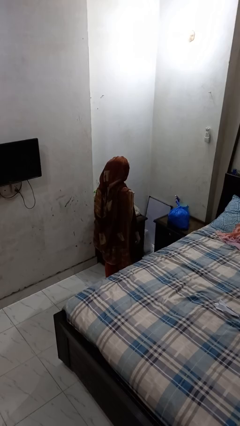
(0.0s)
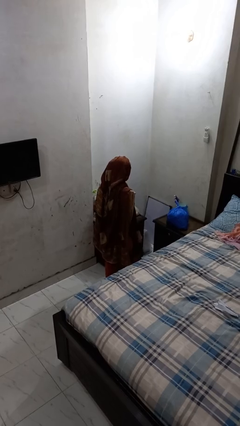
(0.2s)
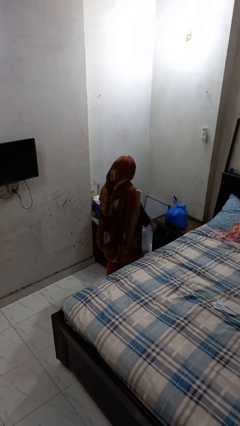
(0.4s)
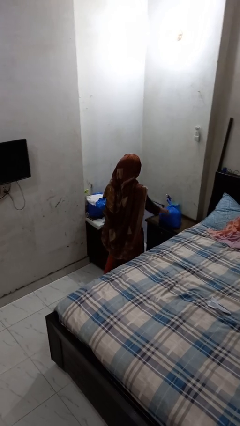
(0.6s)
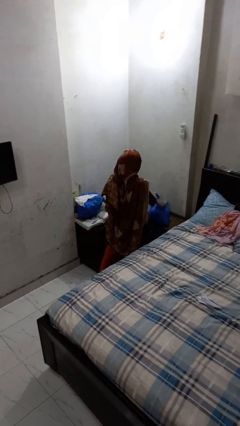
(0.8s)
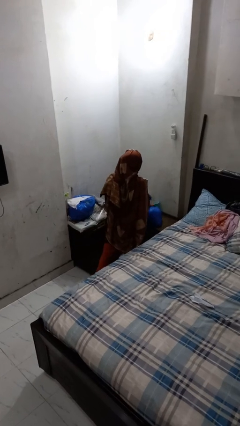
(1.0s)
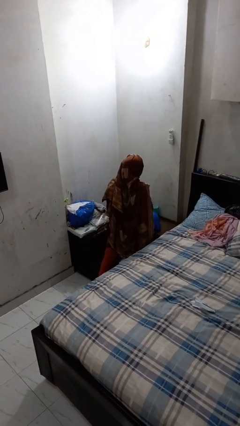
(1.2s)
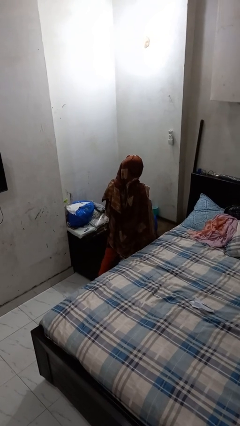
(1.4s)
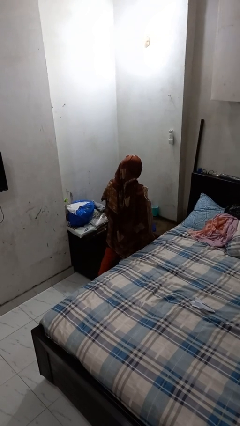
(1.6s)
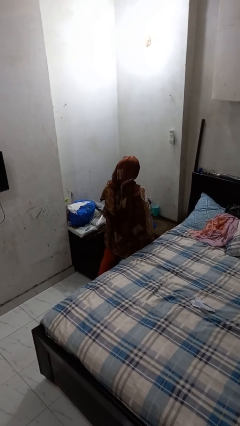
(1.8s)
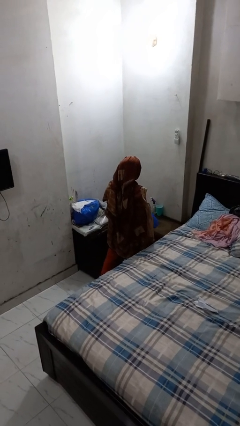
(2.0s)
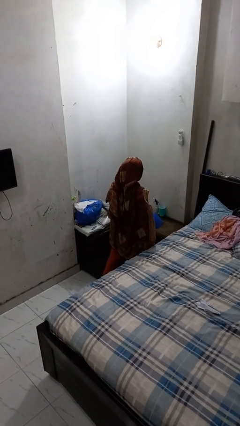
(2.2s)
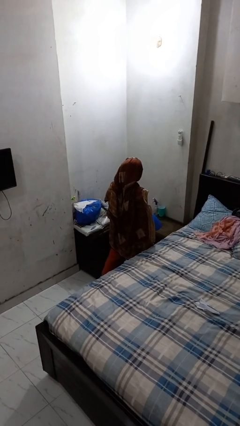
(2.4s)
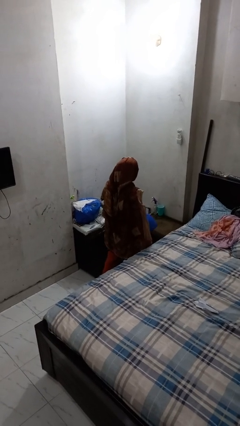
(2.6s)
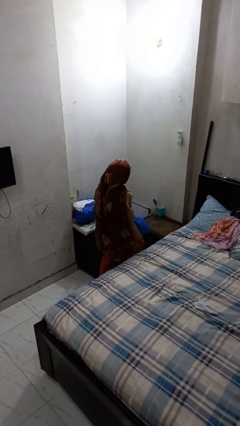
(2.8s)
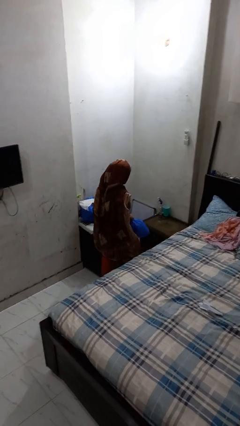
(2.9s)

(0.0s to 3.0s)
person picks up object from table

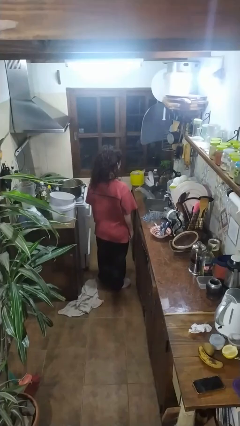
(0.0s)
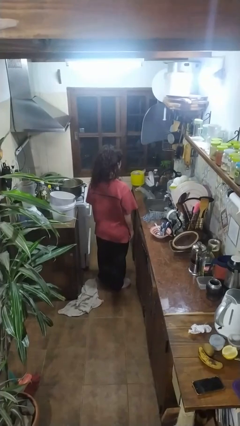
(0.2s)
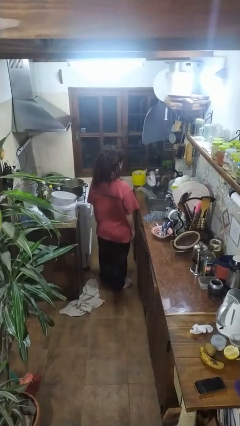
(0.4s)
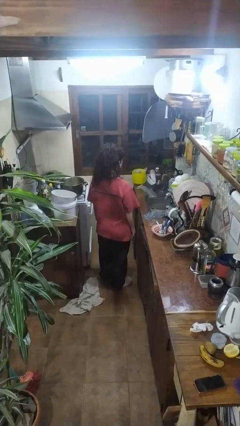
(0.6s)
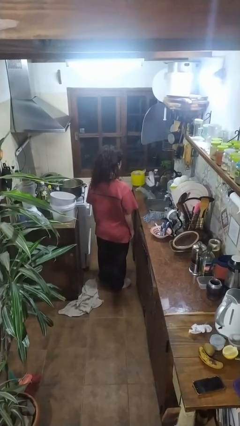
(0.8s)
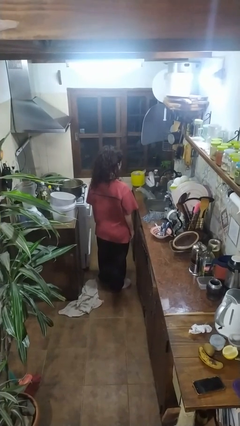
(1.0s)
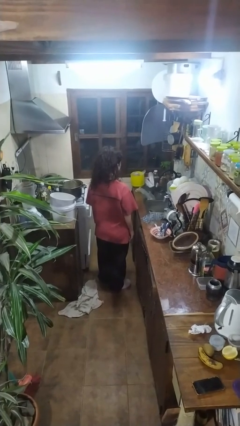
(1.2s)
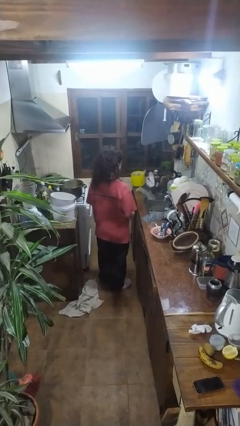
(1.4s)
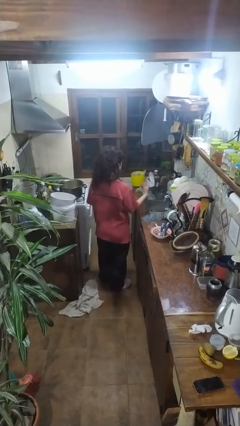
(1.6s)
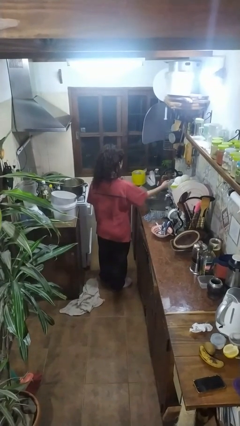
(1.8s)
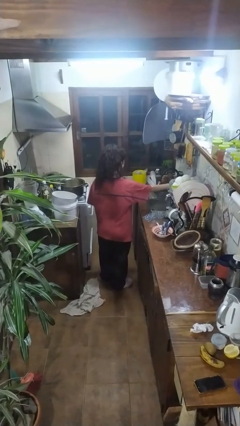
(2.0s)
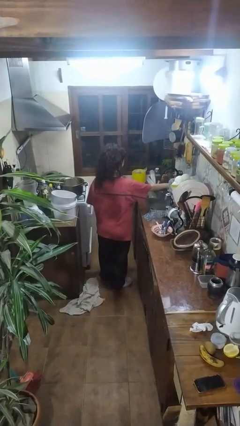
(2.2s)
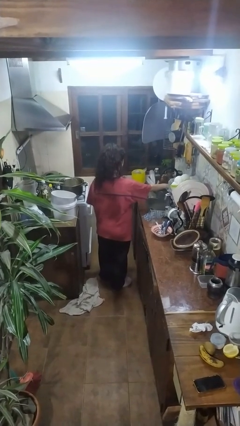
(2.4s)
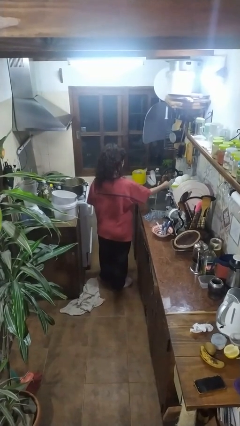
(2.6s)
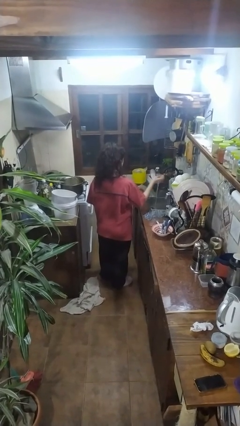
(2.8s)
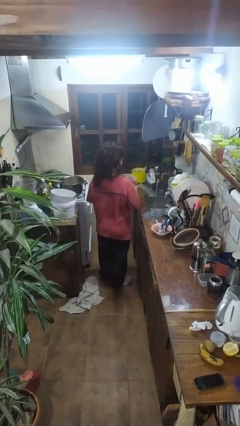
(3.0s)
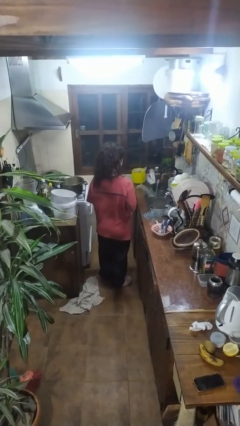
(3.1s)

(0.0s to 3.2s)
person opens clothes washer

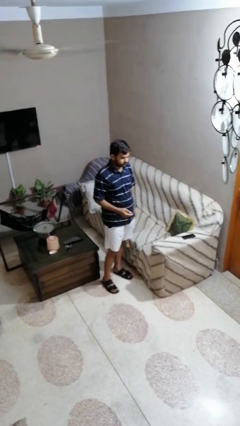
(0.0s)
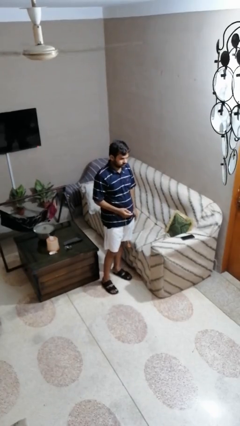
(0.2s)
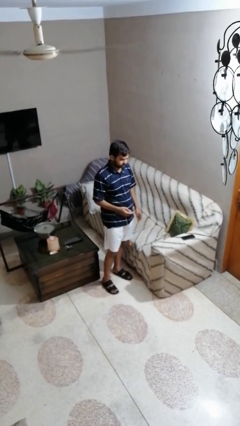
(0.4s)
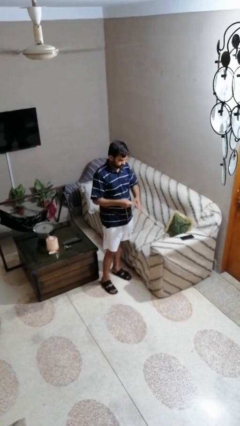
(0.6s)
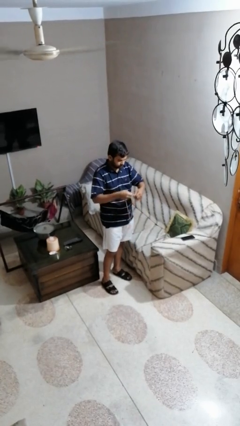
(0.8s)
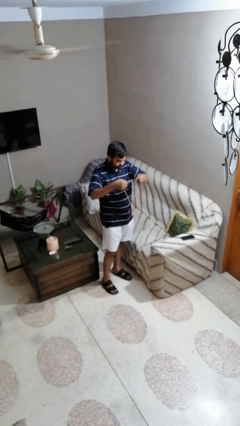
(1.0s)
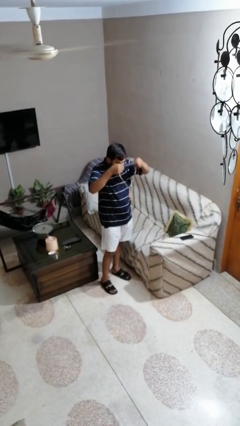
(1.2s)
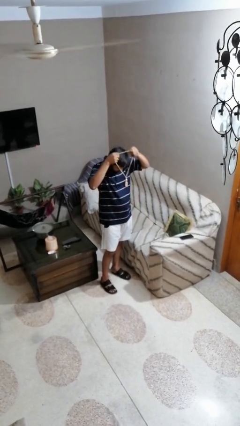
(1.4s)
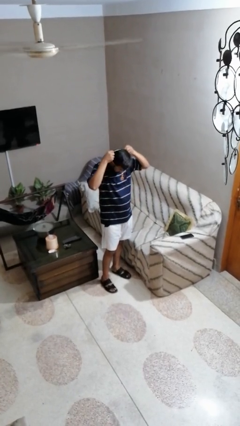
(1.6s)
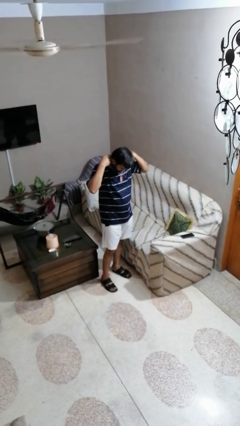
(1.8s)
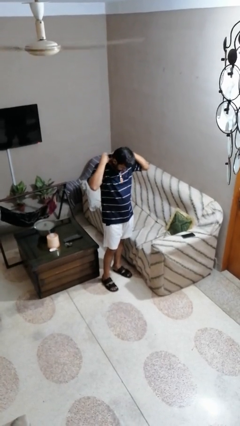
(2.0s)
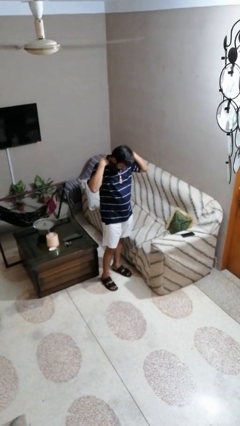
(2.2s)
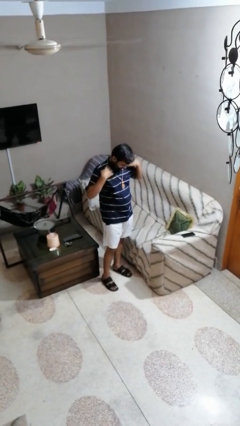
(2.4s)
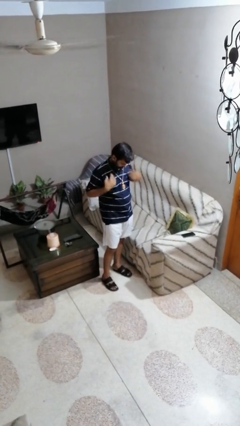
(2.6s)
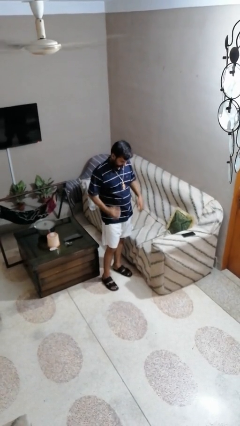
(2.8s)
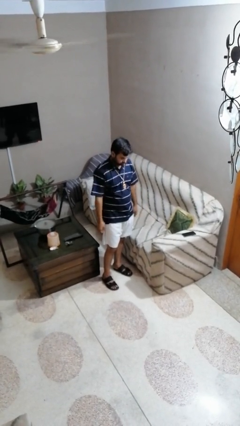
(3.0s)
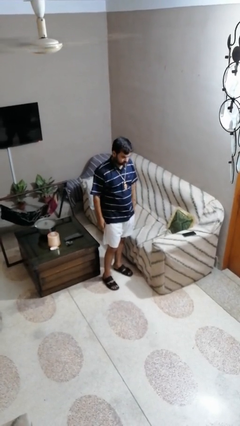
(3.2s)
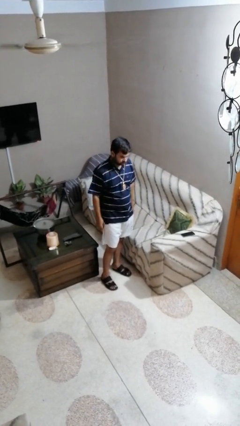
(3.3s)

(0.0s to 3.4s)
person puts on necklace

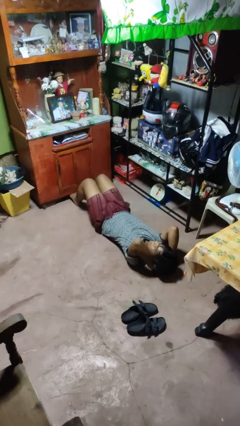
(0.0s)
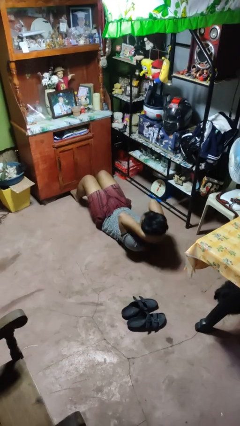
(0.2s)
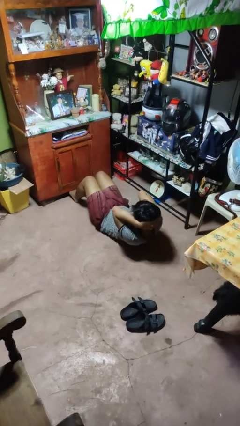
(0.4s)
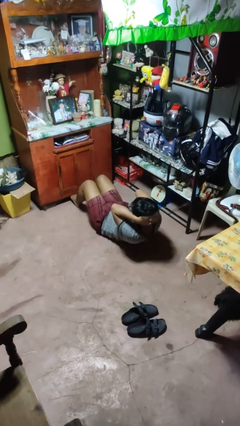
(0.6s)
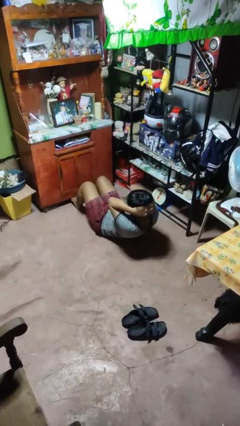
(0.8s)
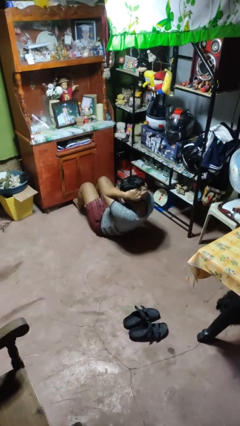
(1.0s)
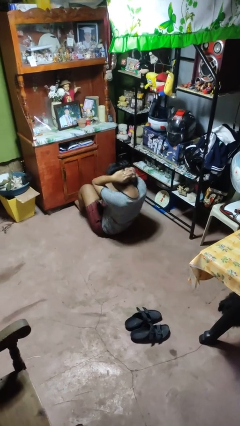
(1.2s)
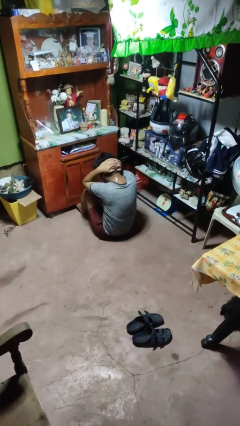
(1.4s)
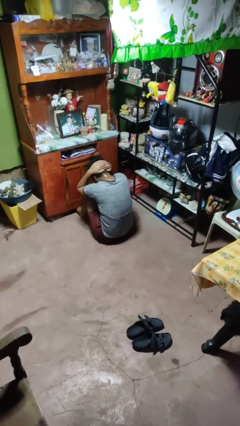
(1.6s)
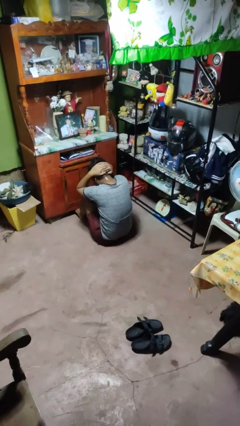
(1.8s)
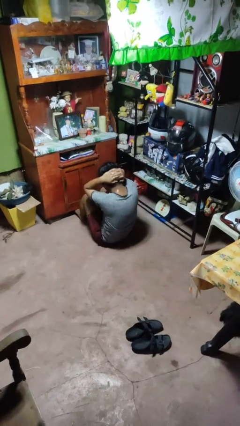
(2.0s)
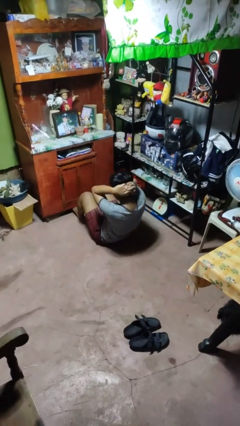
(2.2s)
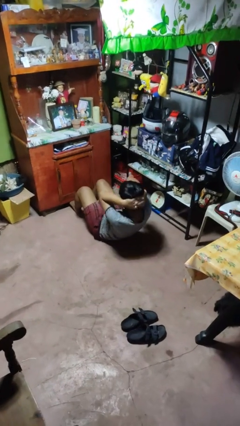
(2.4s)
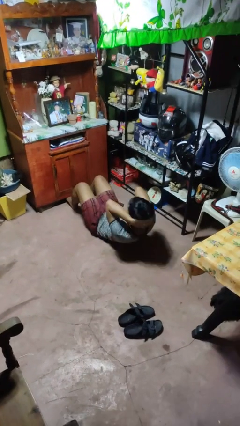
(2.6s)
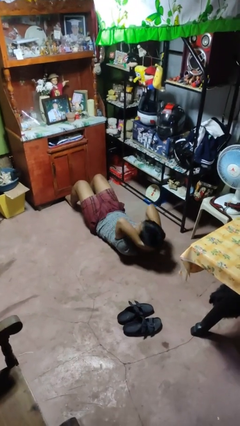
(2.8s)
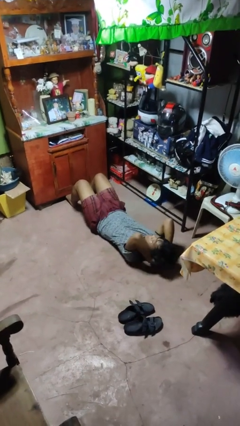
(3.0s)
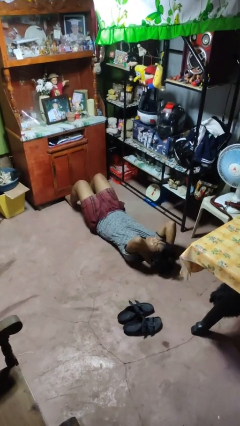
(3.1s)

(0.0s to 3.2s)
person exercises with situp

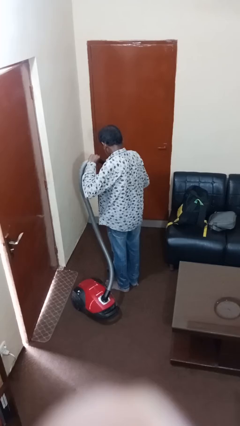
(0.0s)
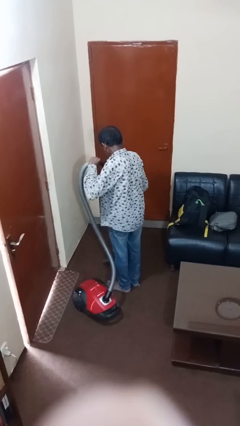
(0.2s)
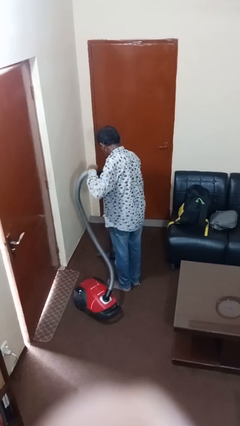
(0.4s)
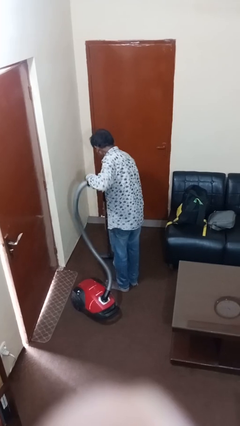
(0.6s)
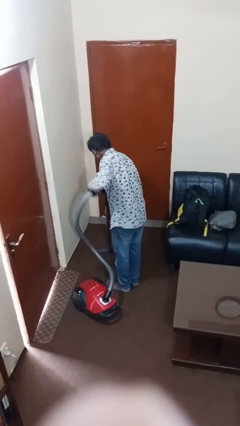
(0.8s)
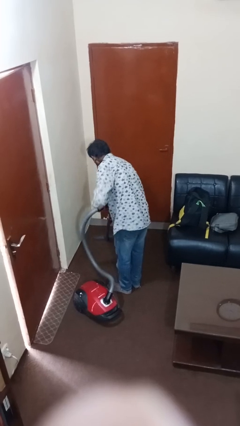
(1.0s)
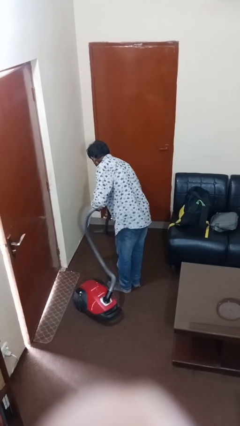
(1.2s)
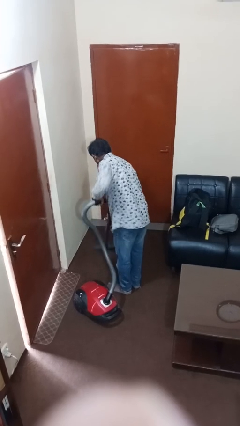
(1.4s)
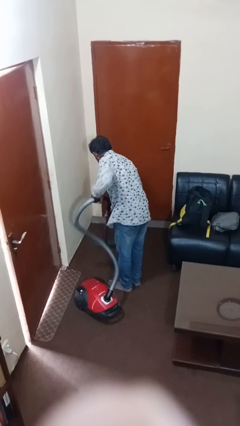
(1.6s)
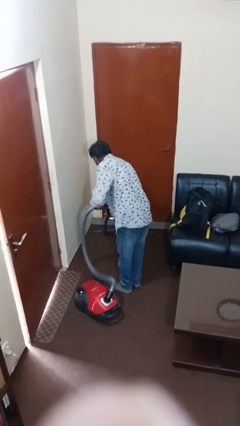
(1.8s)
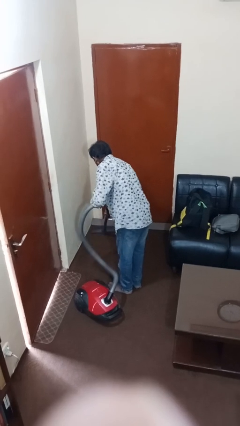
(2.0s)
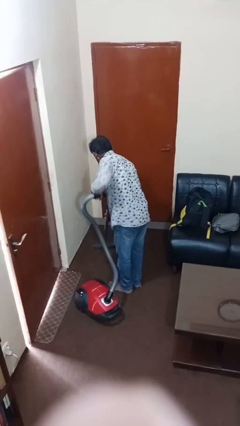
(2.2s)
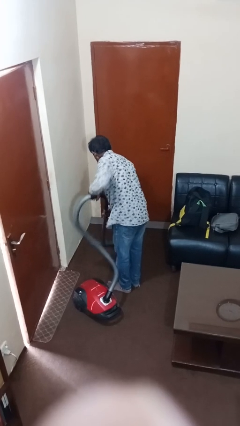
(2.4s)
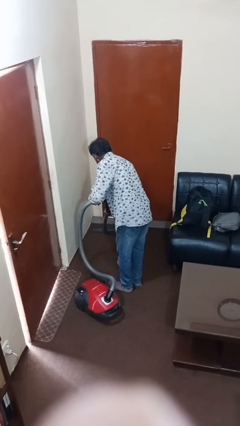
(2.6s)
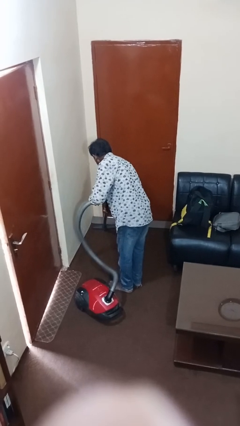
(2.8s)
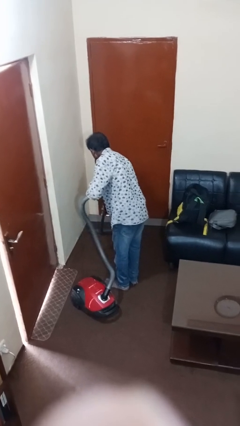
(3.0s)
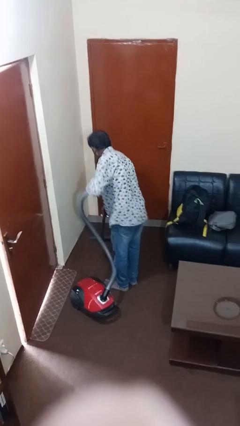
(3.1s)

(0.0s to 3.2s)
person vacuums carpet

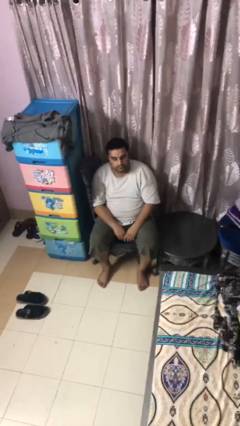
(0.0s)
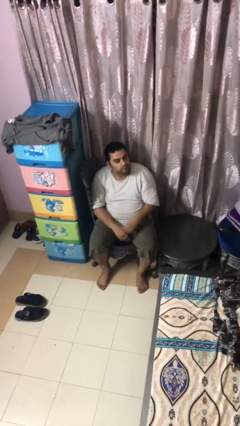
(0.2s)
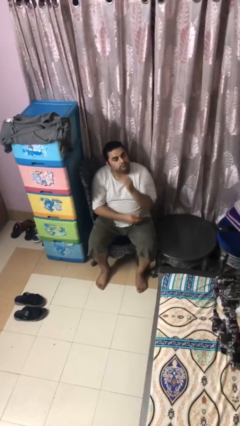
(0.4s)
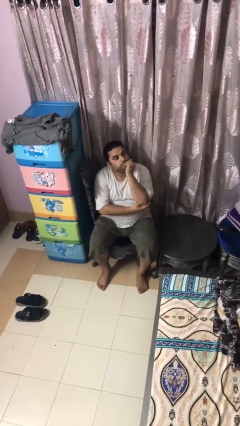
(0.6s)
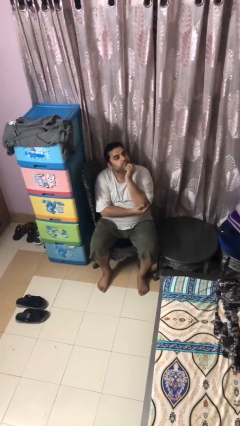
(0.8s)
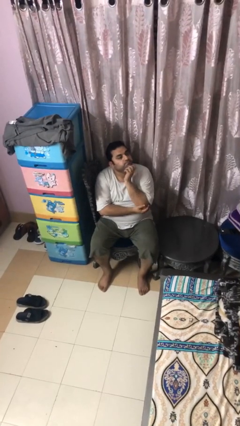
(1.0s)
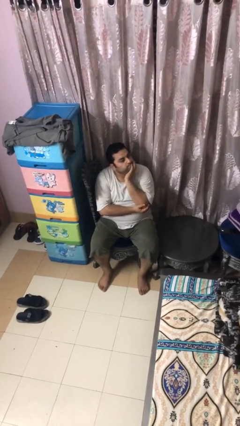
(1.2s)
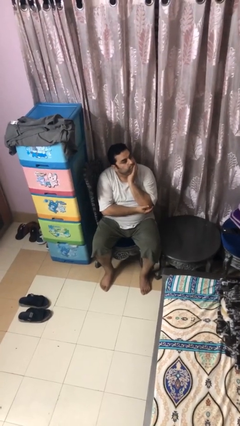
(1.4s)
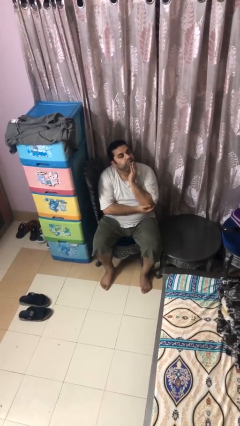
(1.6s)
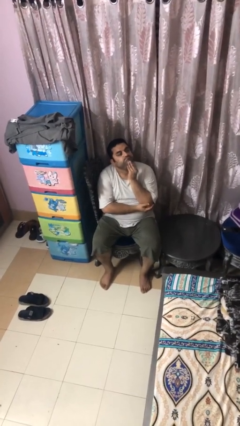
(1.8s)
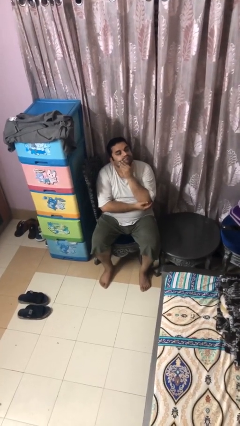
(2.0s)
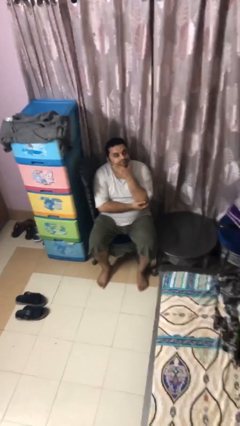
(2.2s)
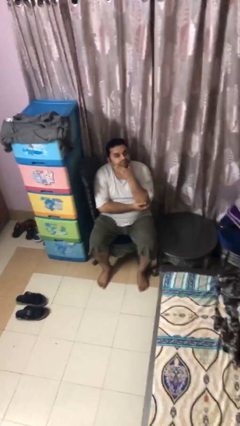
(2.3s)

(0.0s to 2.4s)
person strokes chin
